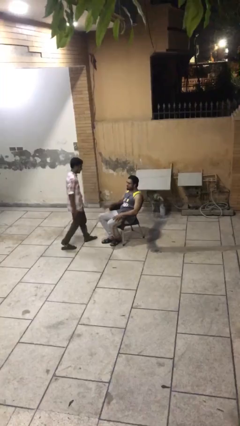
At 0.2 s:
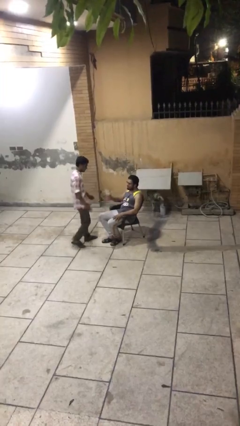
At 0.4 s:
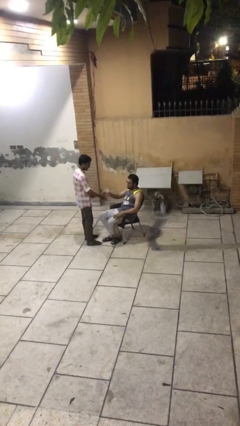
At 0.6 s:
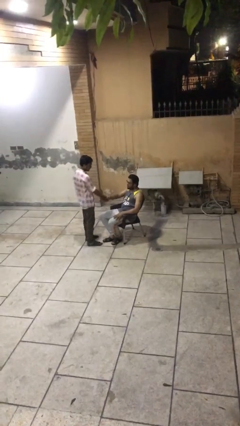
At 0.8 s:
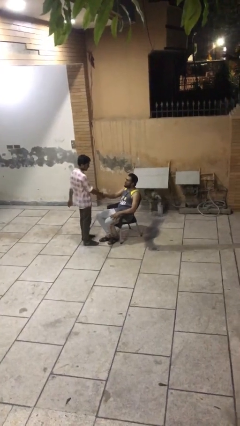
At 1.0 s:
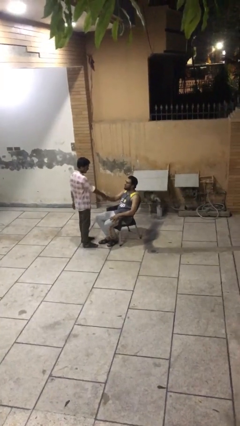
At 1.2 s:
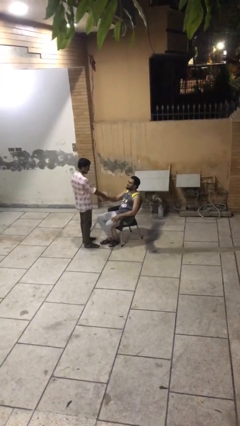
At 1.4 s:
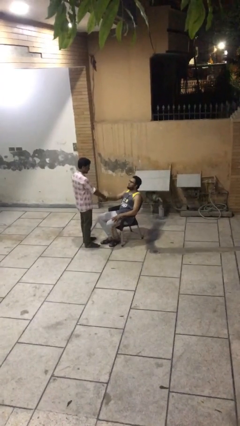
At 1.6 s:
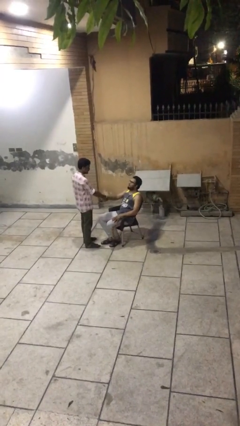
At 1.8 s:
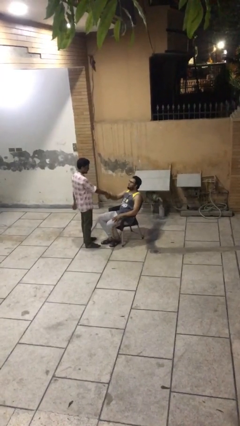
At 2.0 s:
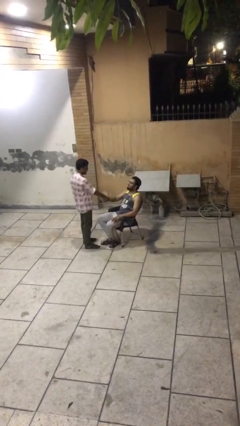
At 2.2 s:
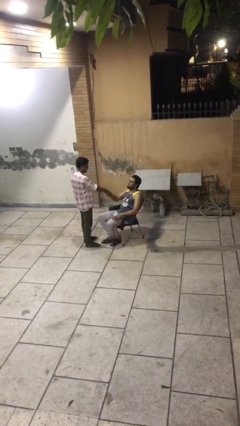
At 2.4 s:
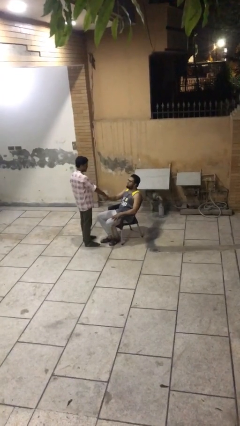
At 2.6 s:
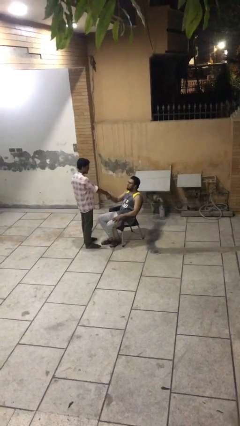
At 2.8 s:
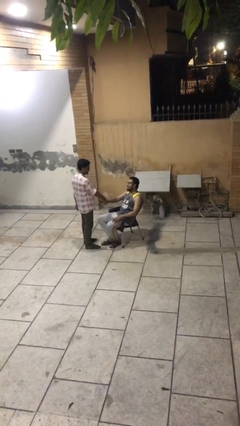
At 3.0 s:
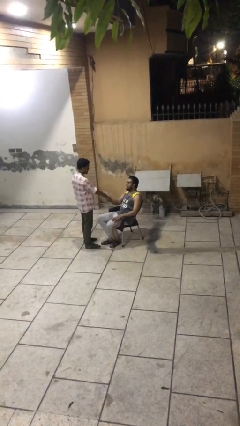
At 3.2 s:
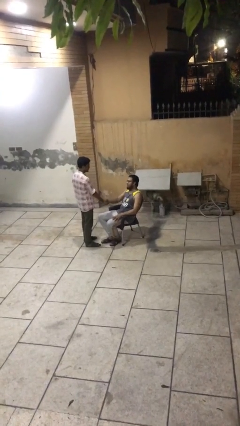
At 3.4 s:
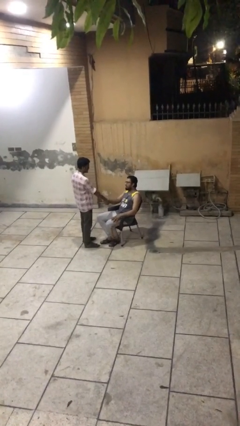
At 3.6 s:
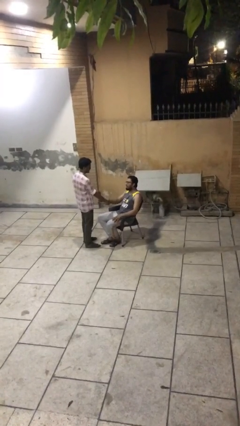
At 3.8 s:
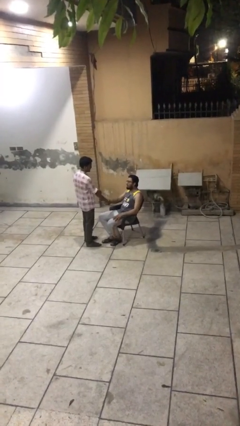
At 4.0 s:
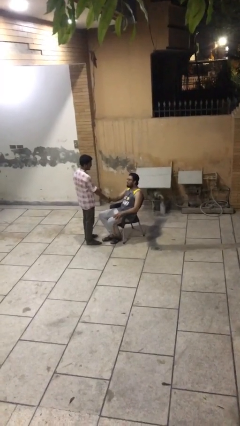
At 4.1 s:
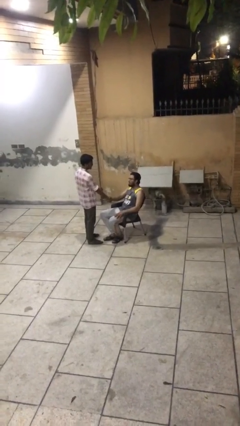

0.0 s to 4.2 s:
person shakes hand

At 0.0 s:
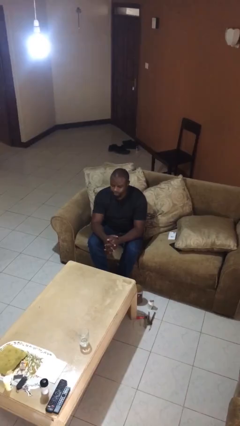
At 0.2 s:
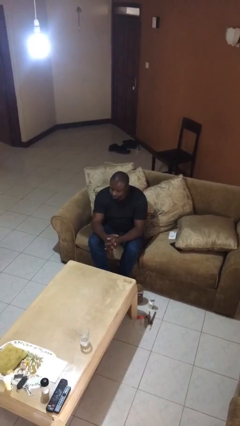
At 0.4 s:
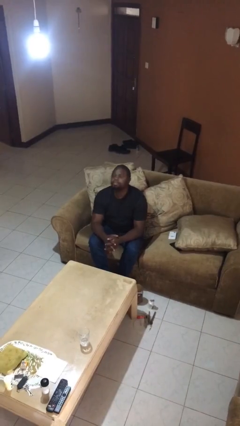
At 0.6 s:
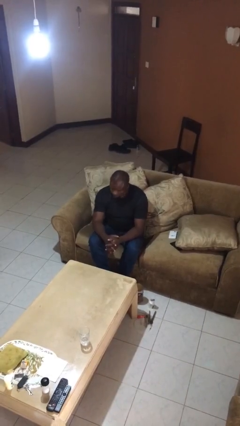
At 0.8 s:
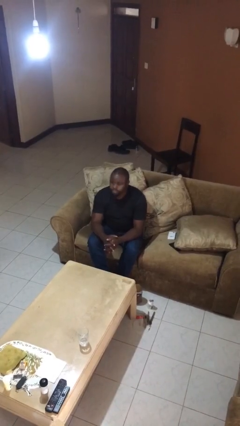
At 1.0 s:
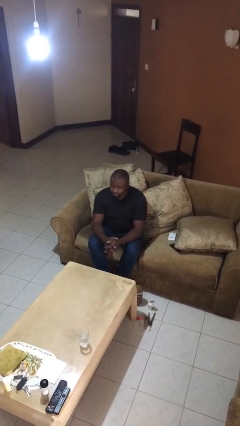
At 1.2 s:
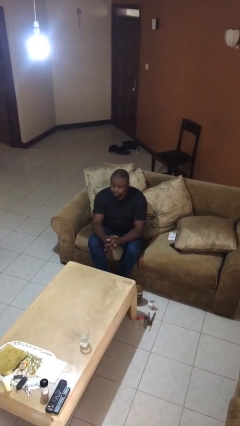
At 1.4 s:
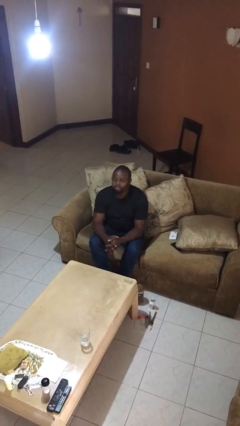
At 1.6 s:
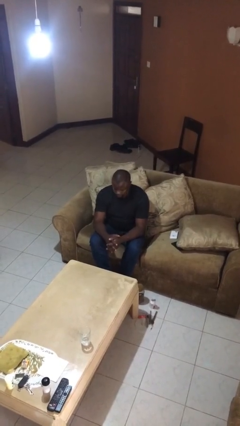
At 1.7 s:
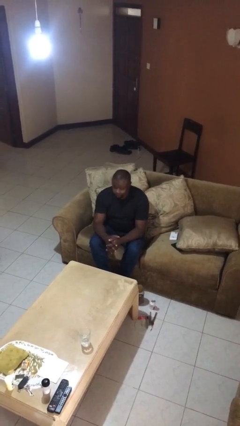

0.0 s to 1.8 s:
person nods head

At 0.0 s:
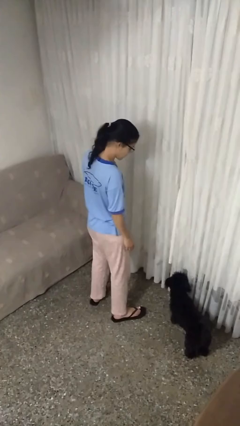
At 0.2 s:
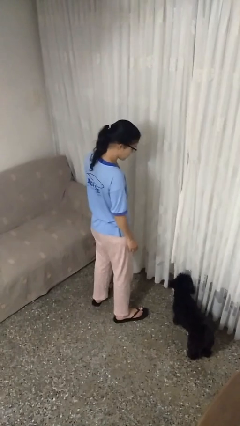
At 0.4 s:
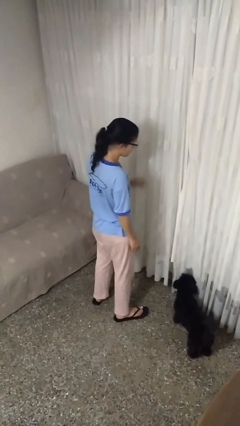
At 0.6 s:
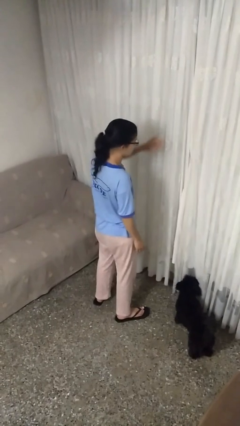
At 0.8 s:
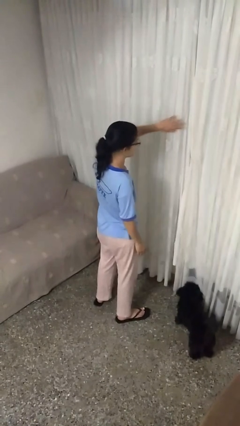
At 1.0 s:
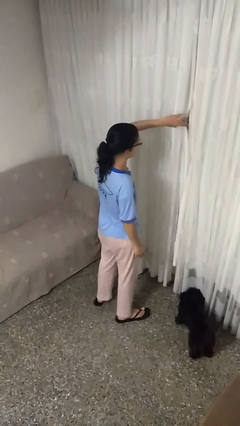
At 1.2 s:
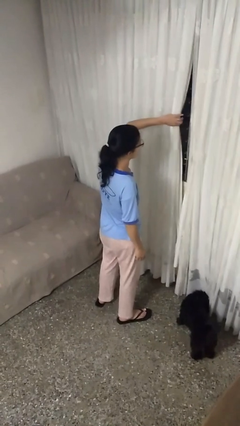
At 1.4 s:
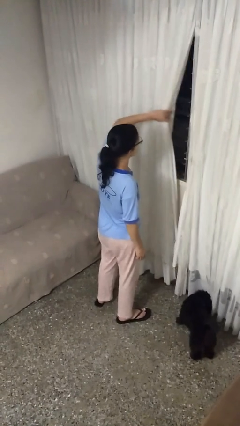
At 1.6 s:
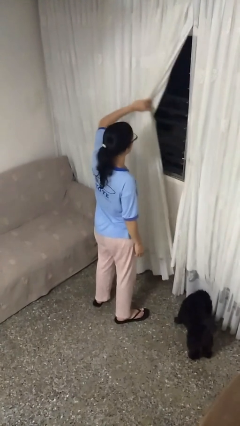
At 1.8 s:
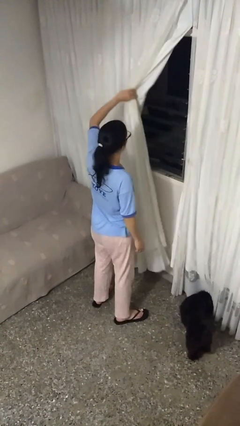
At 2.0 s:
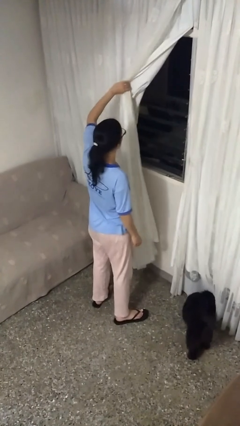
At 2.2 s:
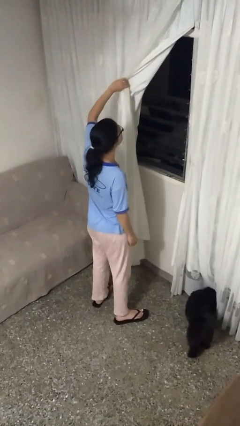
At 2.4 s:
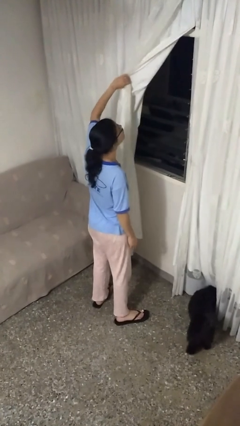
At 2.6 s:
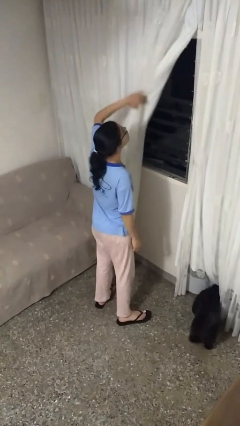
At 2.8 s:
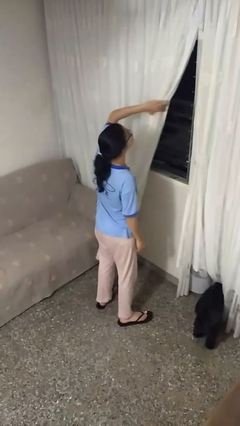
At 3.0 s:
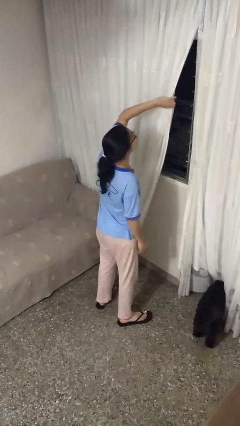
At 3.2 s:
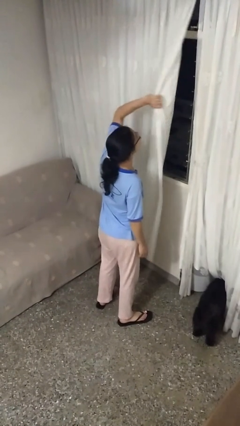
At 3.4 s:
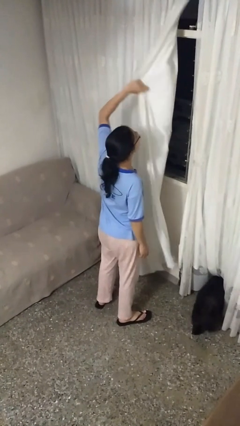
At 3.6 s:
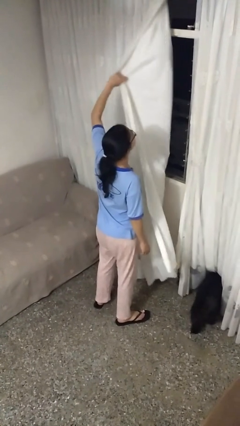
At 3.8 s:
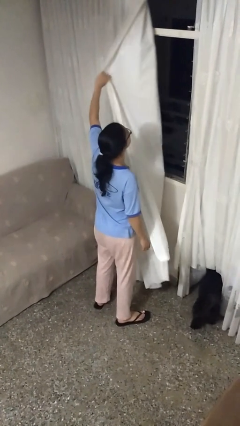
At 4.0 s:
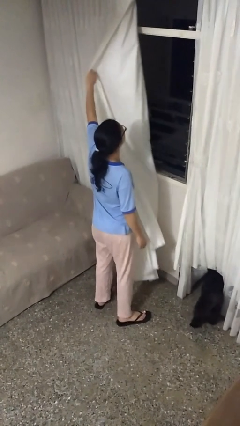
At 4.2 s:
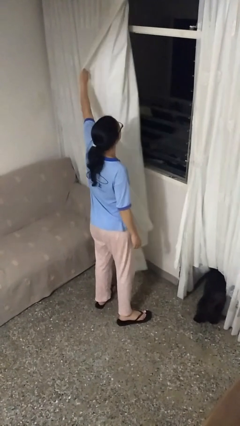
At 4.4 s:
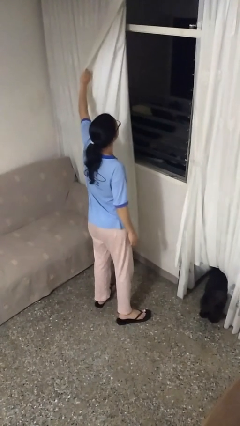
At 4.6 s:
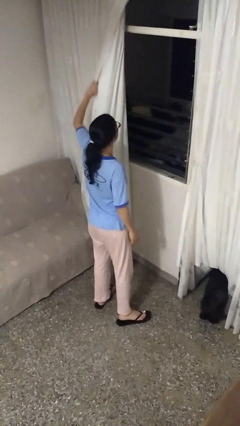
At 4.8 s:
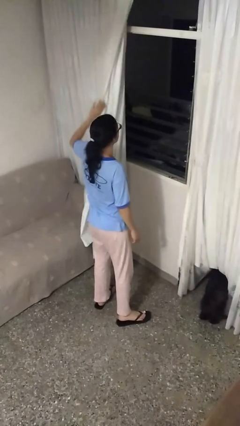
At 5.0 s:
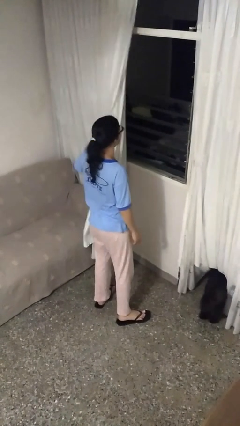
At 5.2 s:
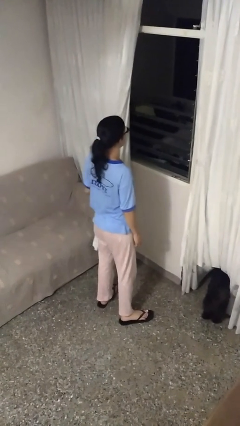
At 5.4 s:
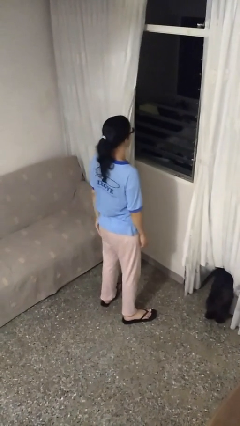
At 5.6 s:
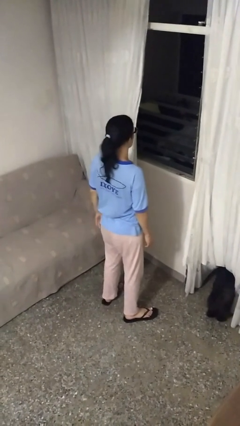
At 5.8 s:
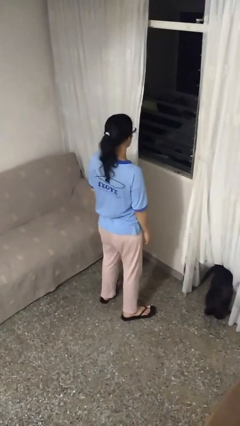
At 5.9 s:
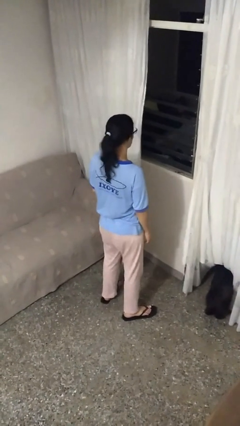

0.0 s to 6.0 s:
person opens curtains

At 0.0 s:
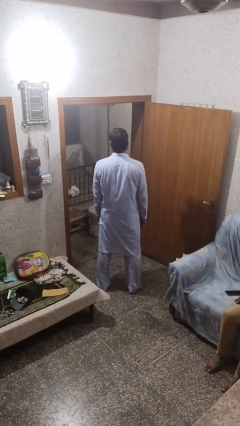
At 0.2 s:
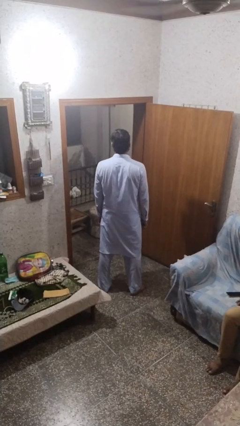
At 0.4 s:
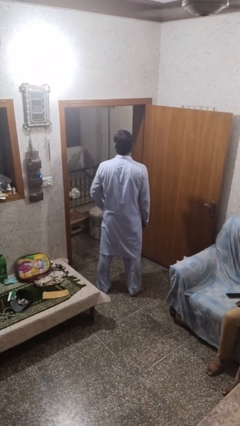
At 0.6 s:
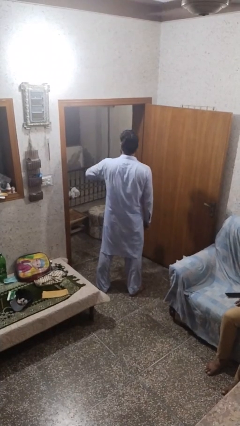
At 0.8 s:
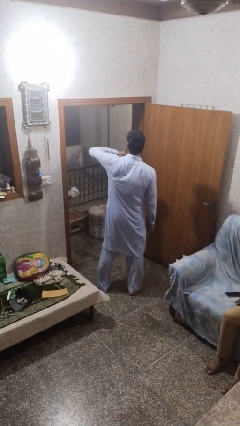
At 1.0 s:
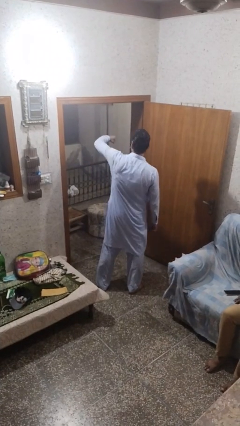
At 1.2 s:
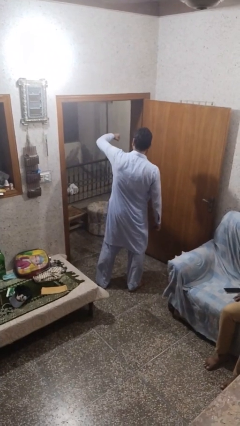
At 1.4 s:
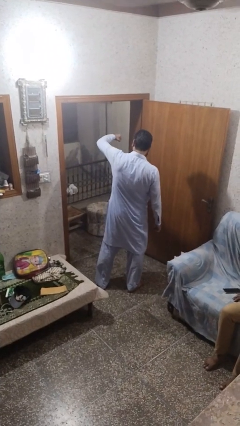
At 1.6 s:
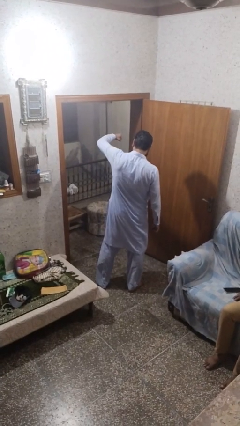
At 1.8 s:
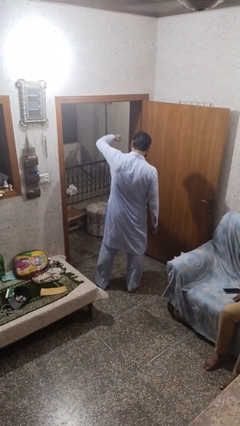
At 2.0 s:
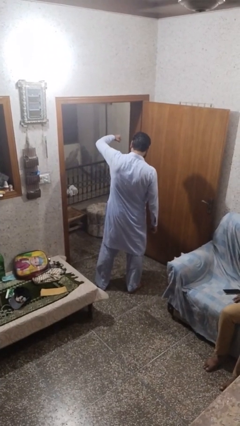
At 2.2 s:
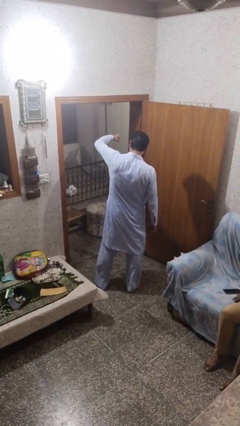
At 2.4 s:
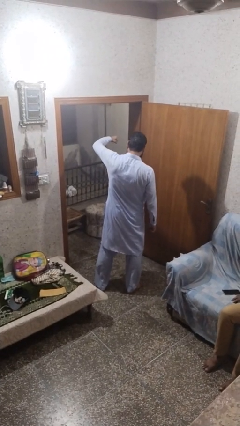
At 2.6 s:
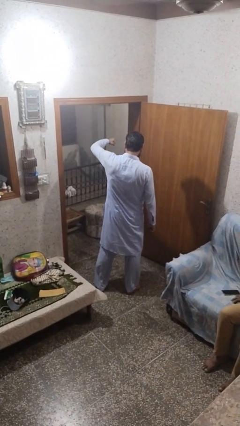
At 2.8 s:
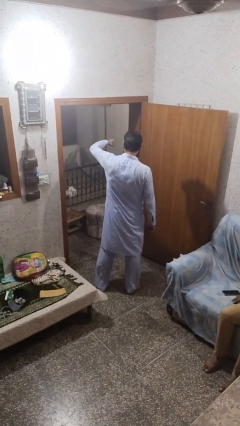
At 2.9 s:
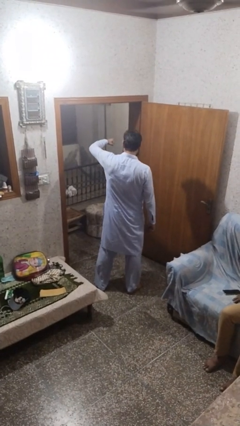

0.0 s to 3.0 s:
person karate chop

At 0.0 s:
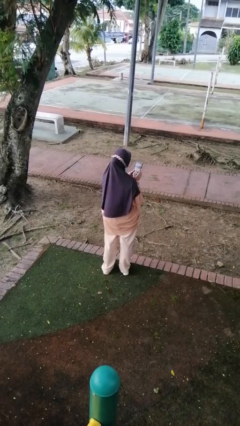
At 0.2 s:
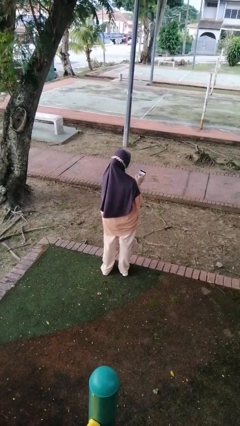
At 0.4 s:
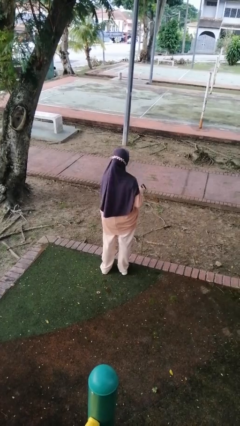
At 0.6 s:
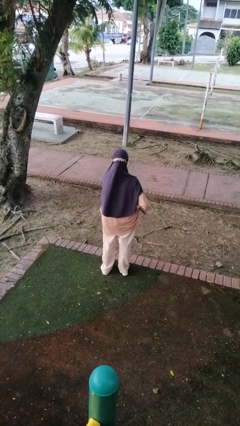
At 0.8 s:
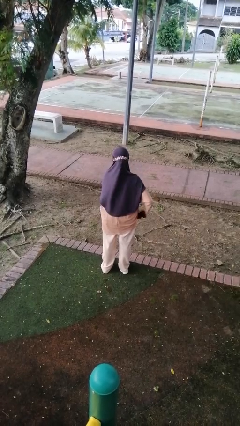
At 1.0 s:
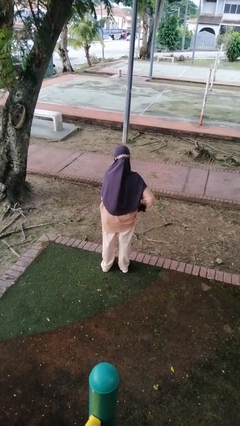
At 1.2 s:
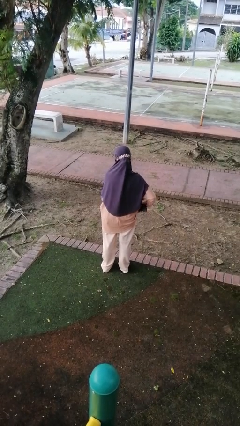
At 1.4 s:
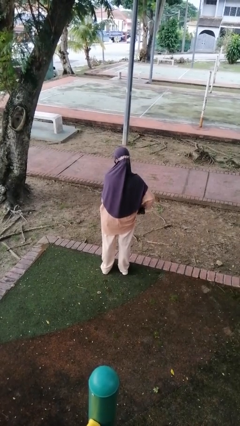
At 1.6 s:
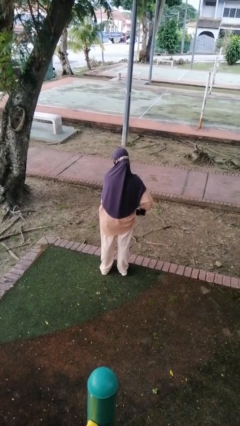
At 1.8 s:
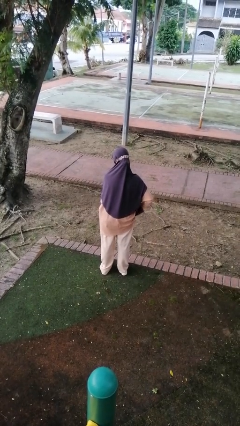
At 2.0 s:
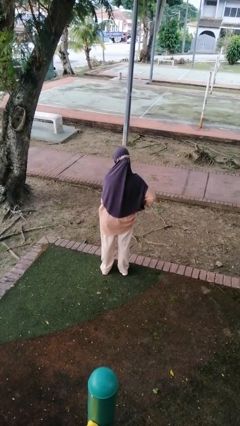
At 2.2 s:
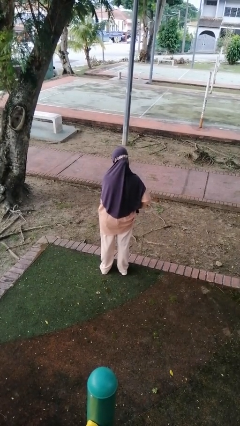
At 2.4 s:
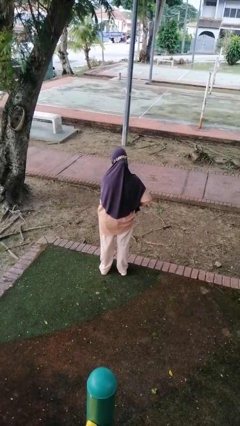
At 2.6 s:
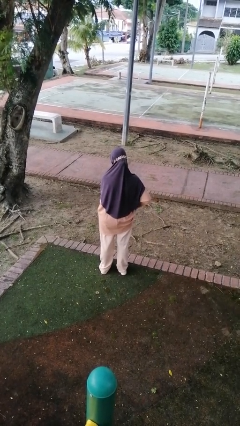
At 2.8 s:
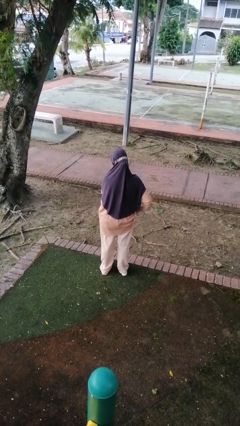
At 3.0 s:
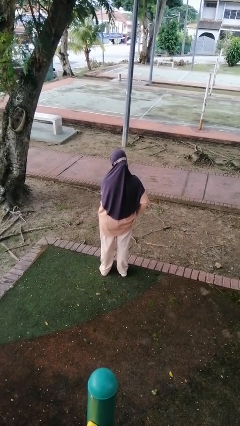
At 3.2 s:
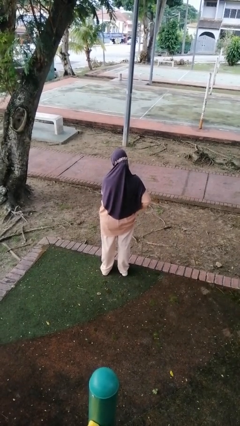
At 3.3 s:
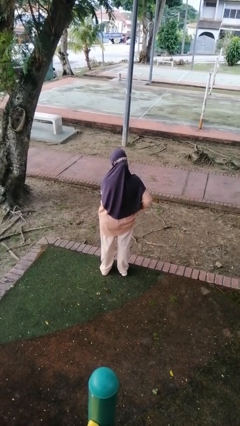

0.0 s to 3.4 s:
person puts phone into pocket
